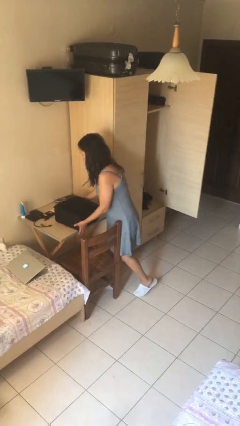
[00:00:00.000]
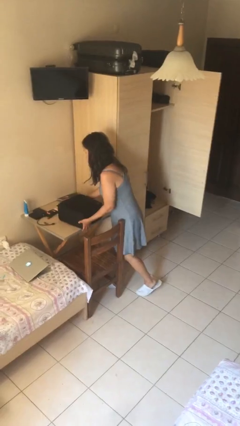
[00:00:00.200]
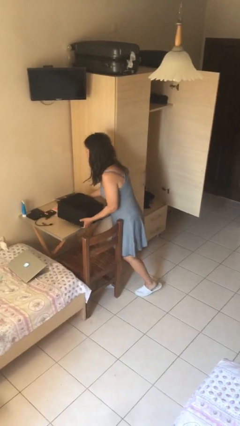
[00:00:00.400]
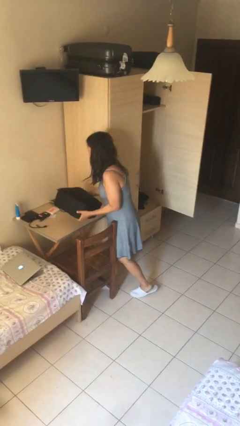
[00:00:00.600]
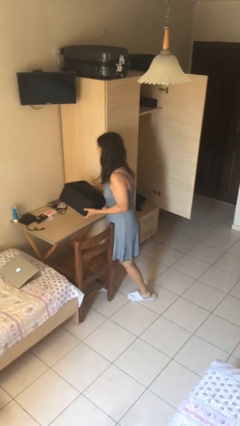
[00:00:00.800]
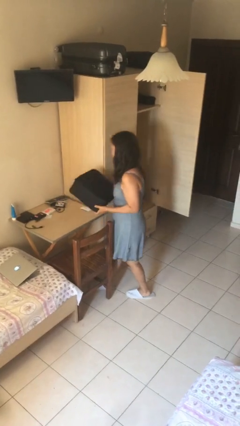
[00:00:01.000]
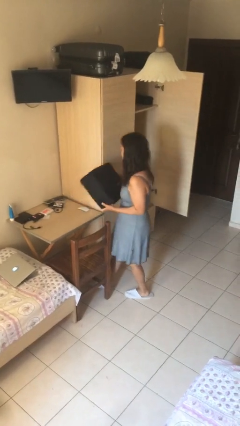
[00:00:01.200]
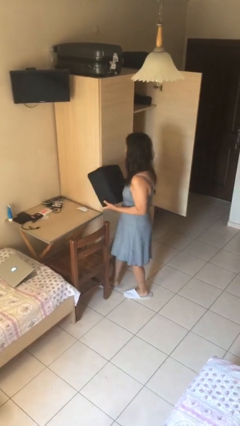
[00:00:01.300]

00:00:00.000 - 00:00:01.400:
person picks up object from table

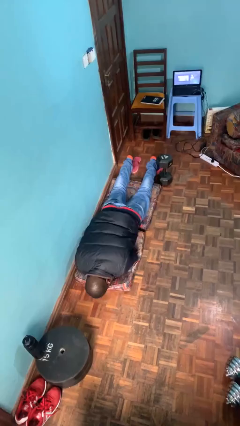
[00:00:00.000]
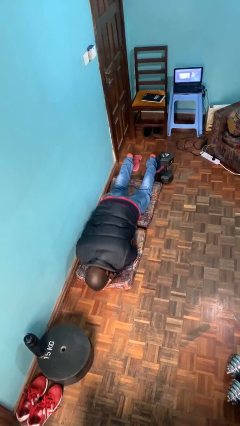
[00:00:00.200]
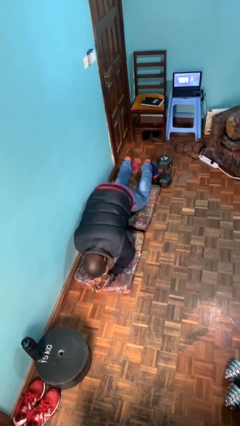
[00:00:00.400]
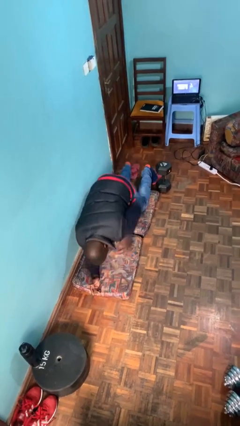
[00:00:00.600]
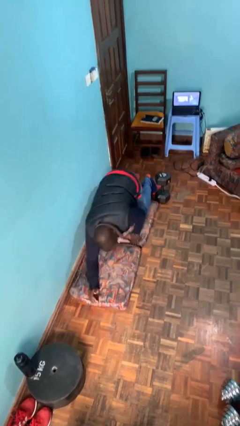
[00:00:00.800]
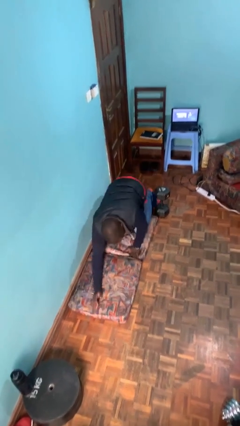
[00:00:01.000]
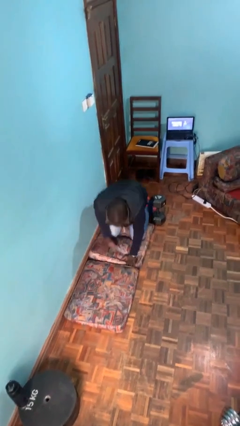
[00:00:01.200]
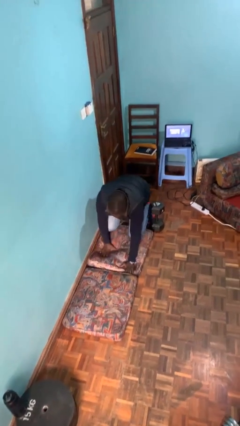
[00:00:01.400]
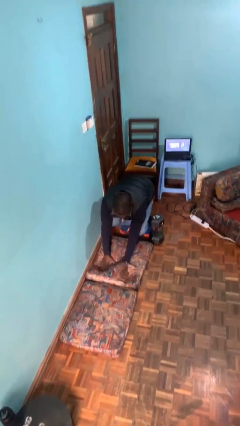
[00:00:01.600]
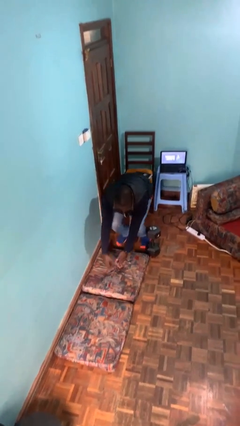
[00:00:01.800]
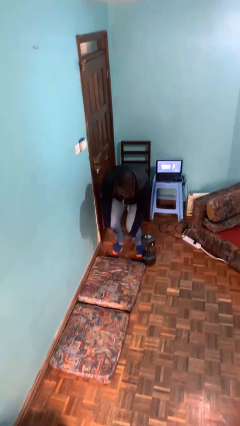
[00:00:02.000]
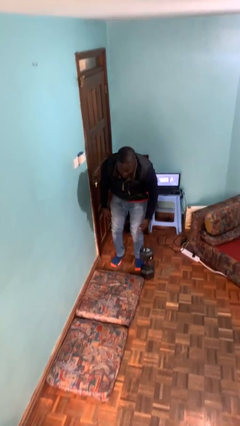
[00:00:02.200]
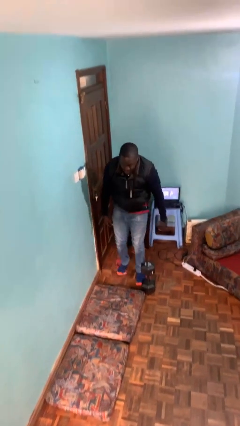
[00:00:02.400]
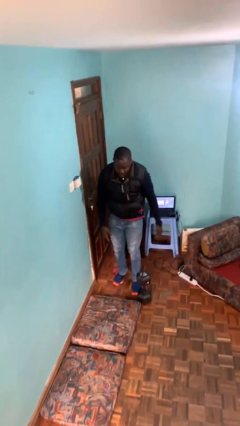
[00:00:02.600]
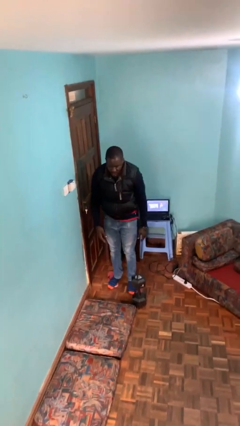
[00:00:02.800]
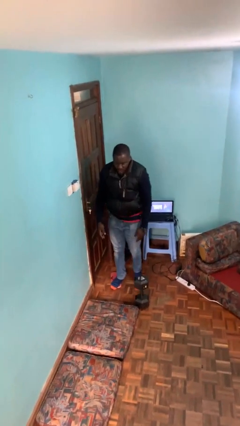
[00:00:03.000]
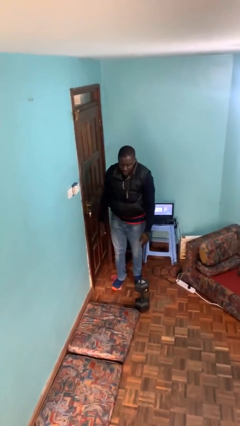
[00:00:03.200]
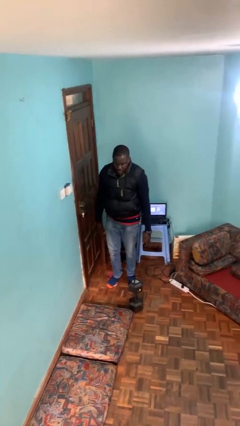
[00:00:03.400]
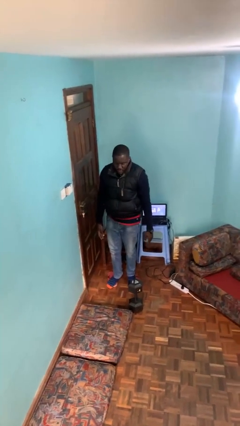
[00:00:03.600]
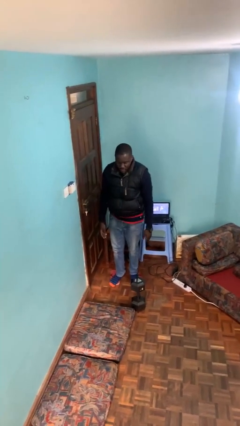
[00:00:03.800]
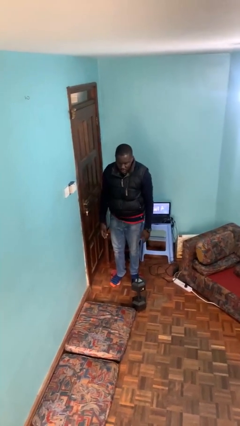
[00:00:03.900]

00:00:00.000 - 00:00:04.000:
person stands up from floor

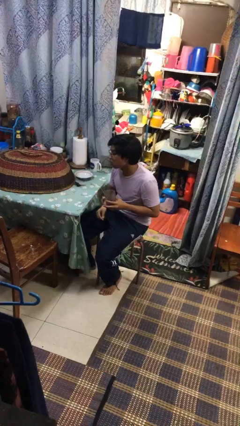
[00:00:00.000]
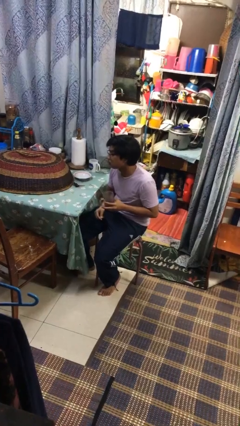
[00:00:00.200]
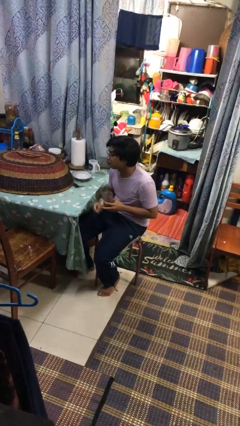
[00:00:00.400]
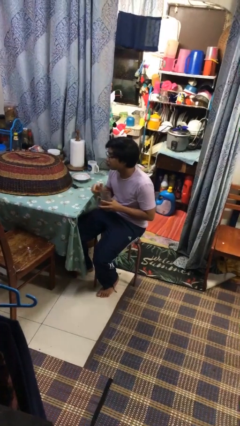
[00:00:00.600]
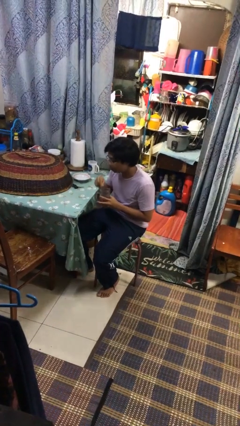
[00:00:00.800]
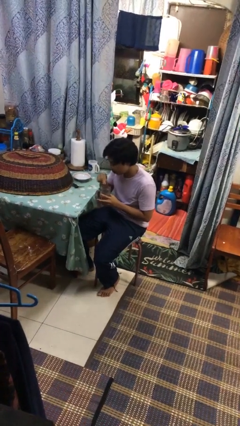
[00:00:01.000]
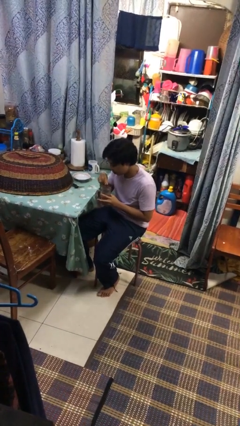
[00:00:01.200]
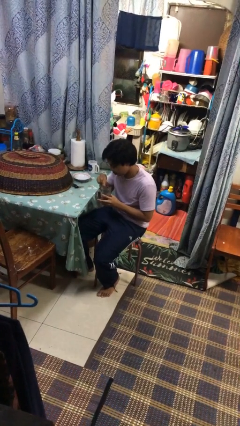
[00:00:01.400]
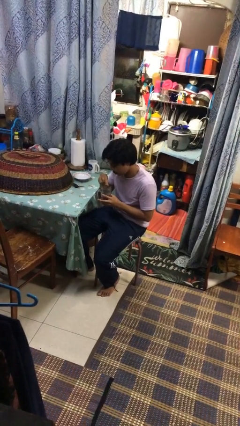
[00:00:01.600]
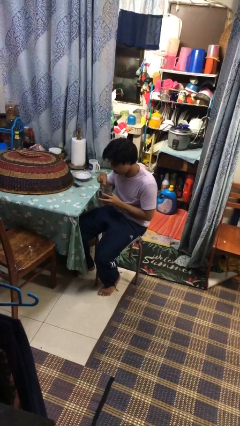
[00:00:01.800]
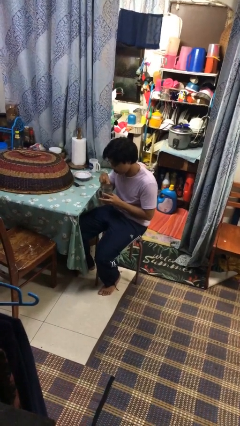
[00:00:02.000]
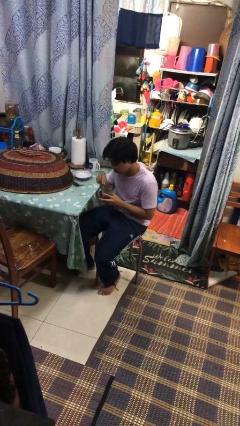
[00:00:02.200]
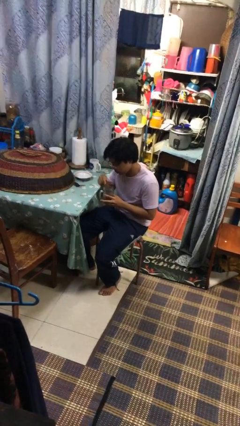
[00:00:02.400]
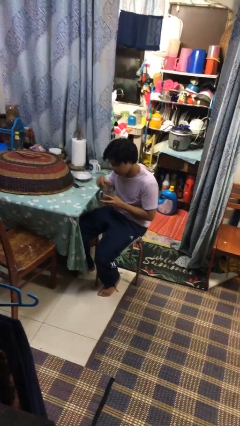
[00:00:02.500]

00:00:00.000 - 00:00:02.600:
person stirs mug

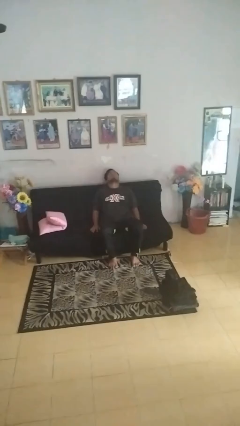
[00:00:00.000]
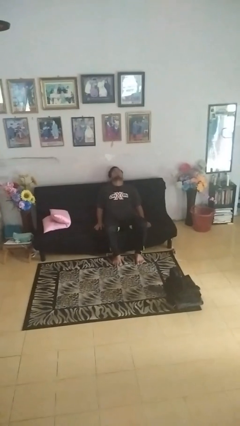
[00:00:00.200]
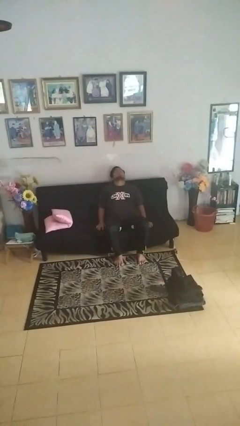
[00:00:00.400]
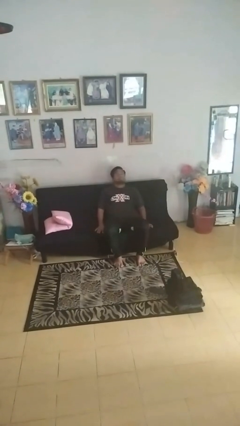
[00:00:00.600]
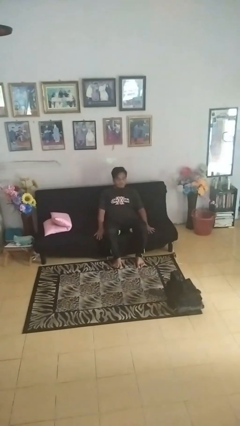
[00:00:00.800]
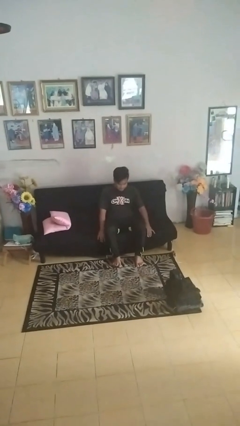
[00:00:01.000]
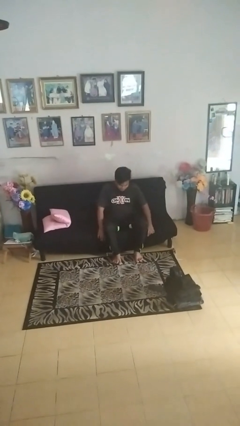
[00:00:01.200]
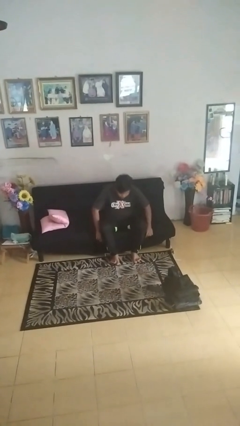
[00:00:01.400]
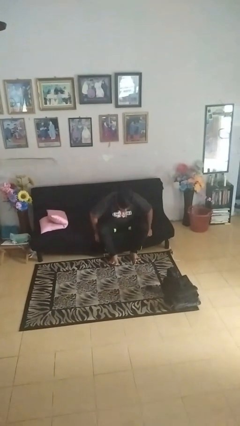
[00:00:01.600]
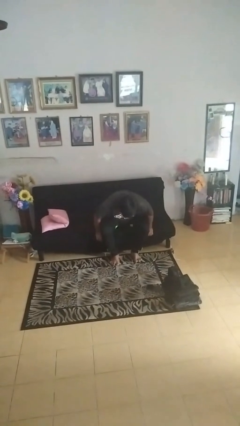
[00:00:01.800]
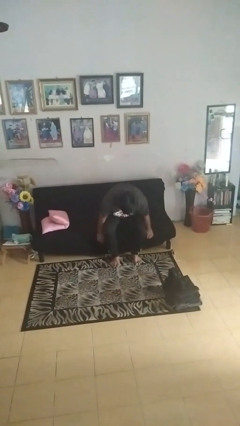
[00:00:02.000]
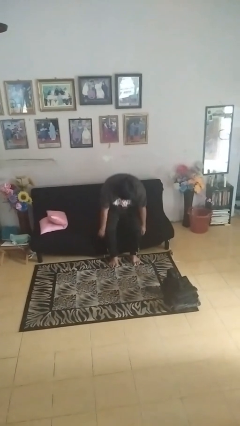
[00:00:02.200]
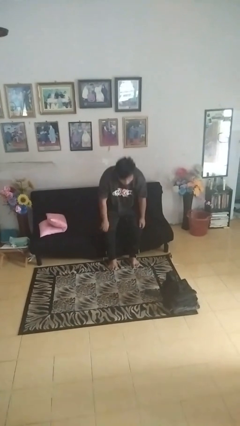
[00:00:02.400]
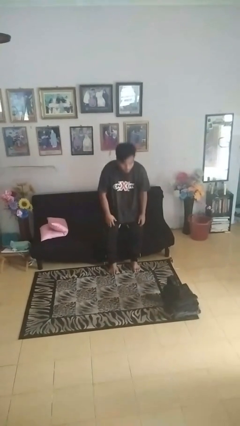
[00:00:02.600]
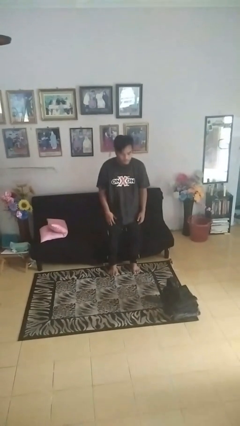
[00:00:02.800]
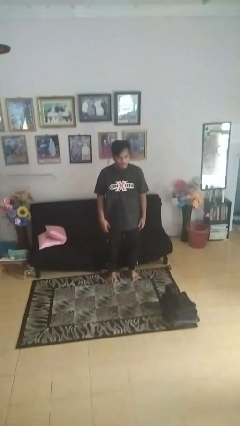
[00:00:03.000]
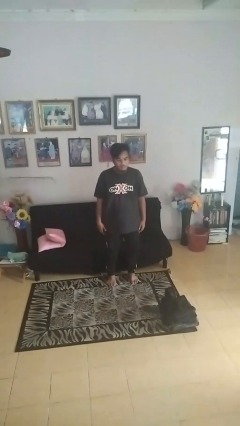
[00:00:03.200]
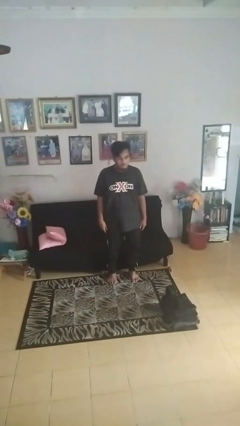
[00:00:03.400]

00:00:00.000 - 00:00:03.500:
person stands up

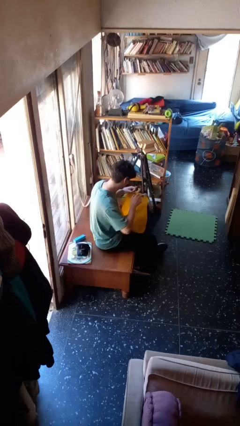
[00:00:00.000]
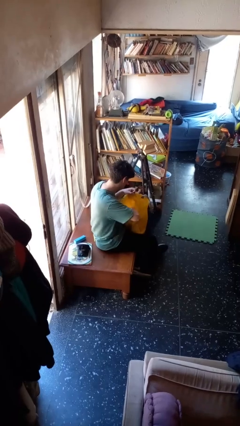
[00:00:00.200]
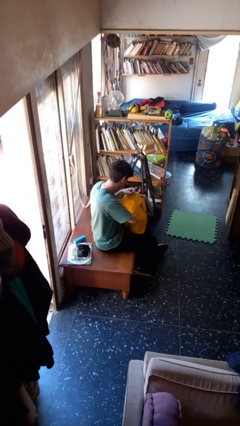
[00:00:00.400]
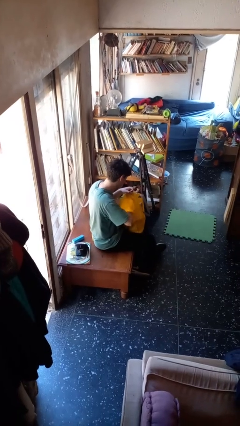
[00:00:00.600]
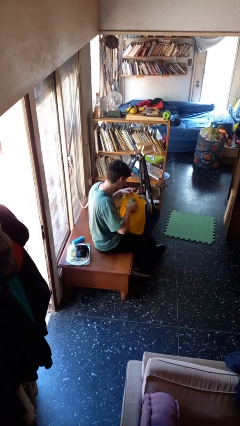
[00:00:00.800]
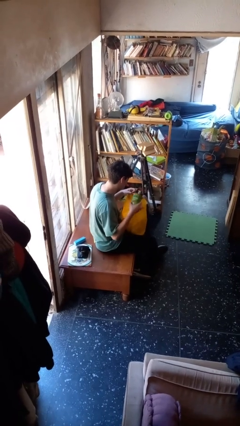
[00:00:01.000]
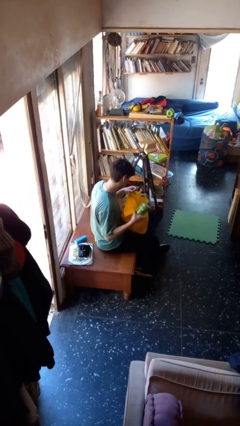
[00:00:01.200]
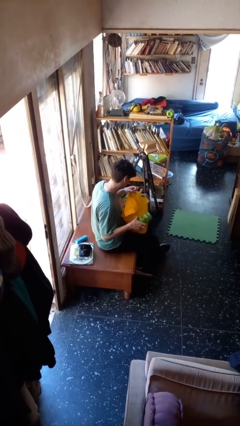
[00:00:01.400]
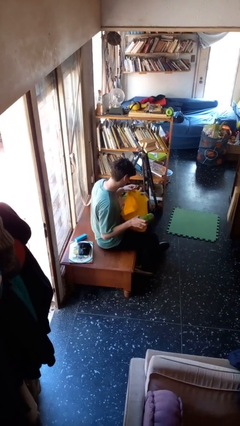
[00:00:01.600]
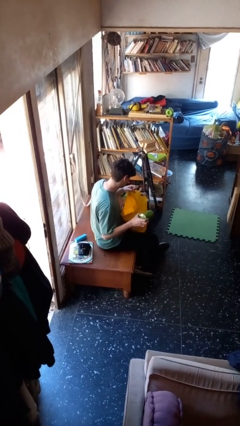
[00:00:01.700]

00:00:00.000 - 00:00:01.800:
person takes object from bag

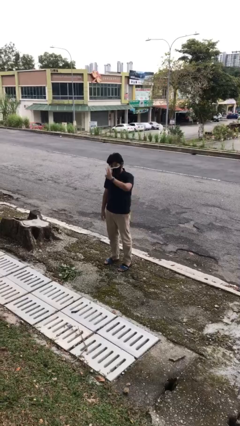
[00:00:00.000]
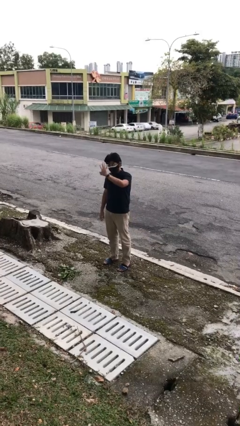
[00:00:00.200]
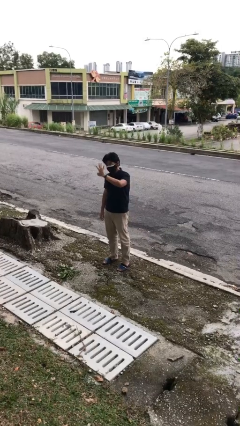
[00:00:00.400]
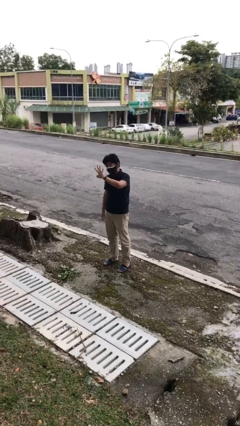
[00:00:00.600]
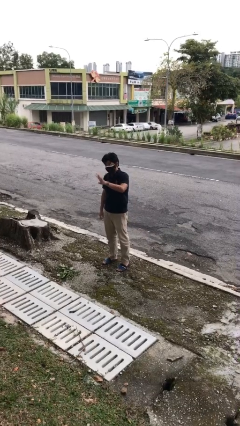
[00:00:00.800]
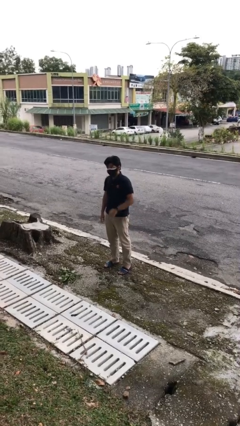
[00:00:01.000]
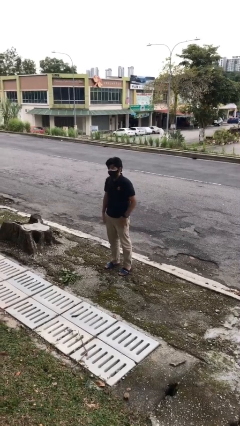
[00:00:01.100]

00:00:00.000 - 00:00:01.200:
person gestures number four

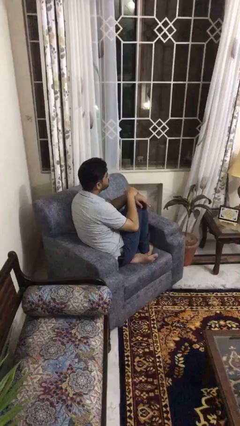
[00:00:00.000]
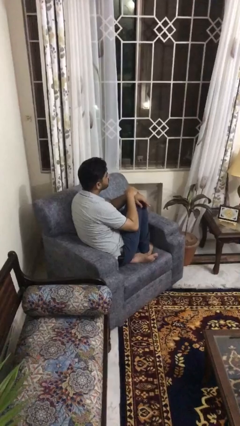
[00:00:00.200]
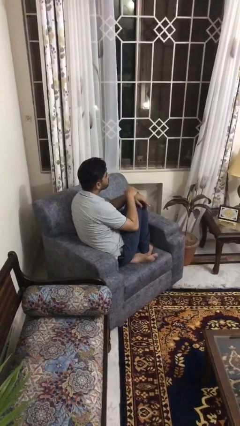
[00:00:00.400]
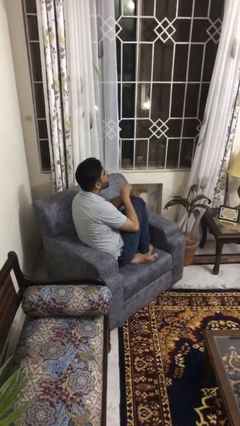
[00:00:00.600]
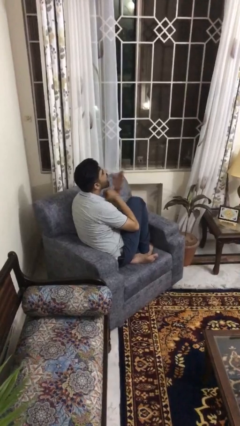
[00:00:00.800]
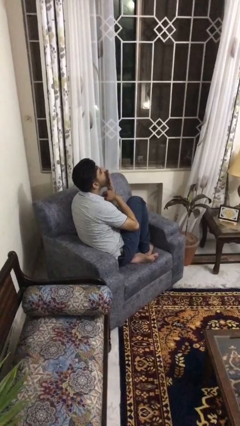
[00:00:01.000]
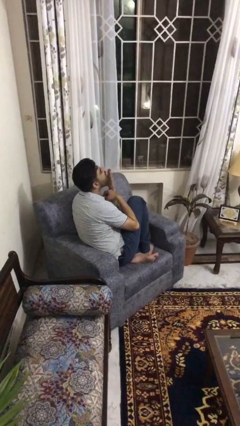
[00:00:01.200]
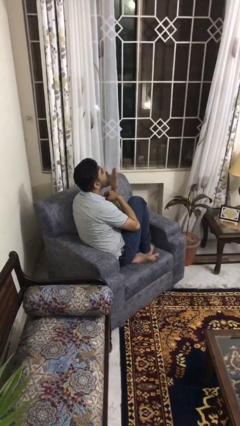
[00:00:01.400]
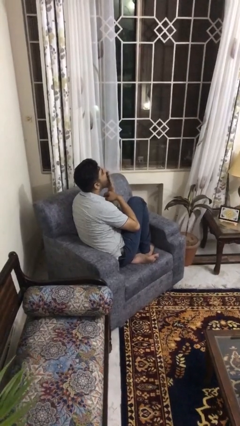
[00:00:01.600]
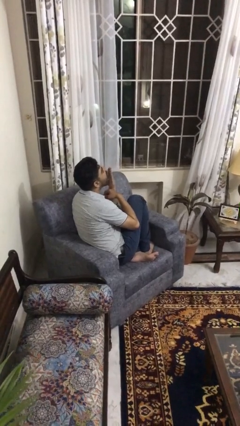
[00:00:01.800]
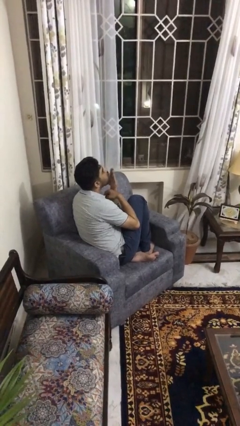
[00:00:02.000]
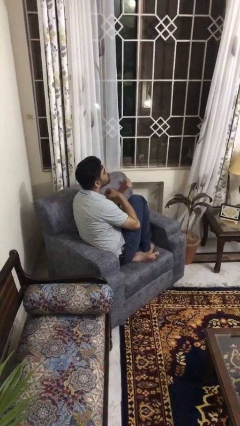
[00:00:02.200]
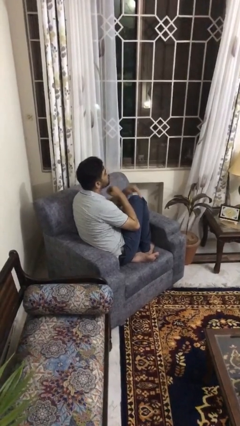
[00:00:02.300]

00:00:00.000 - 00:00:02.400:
person yawns
